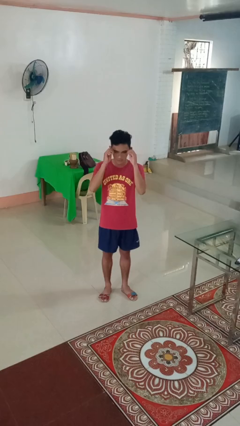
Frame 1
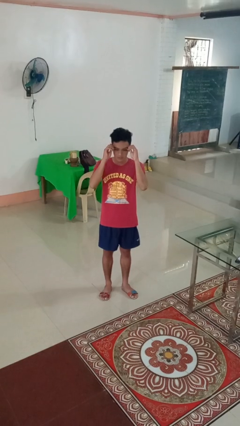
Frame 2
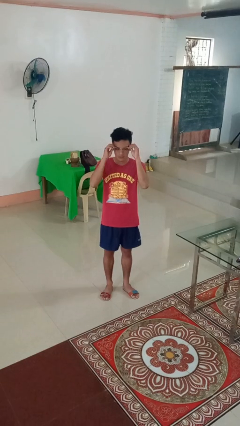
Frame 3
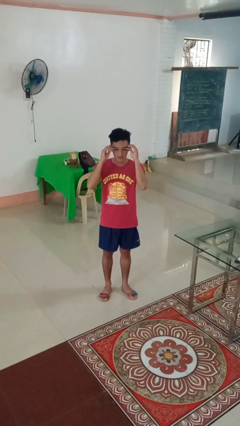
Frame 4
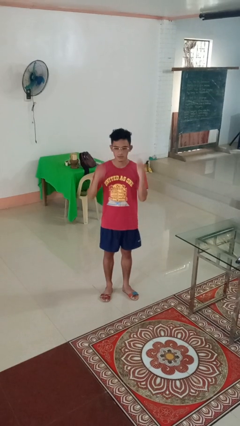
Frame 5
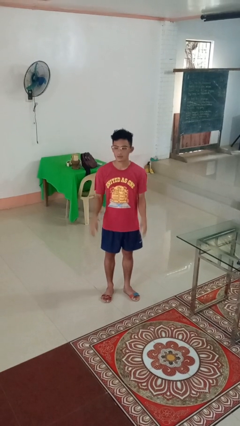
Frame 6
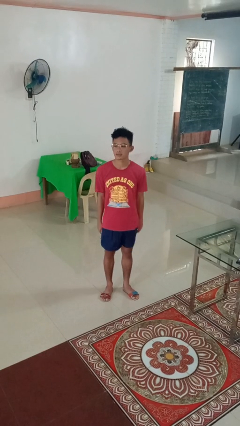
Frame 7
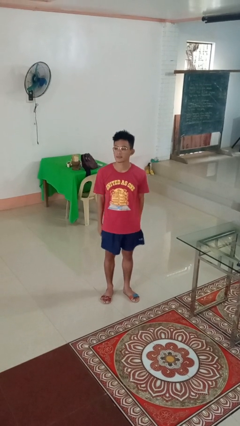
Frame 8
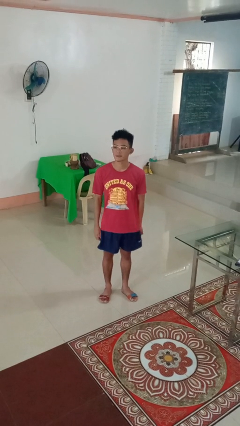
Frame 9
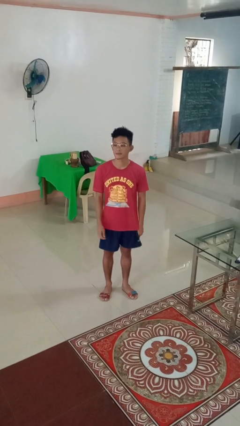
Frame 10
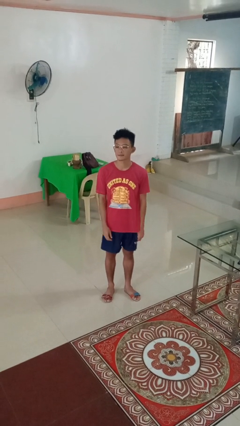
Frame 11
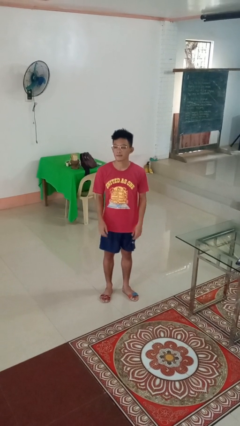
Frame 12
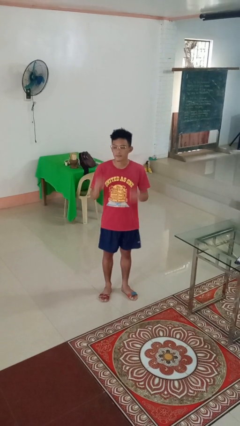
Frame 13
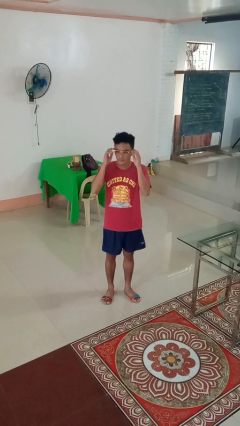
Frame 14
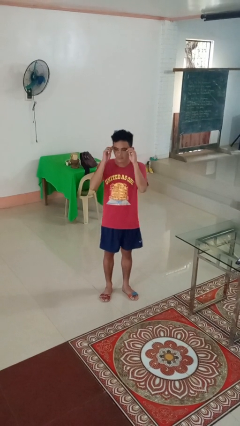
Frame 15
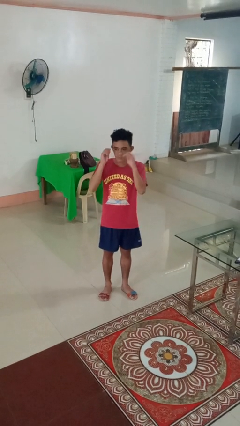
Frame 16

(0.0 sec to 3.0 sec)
person puts on glasses

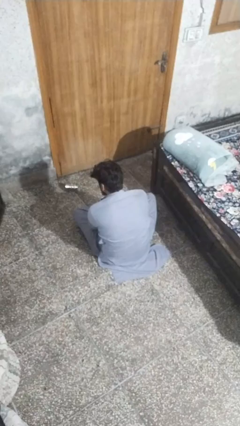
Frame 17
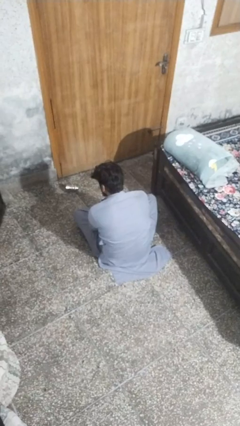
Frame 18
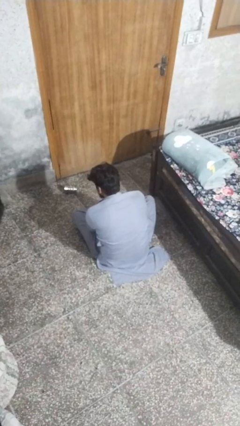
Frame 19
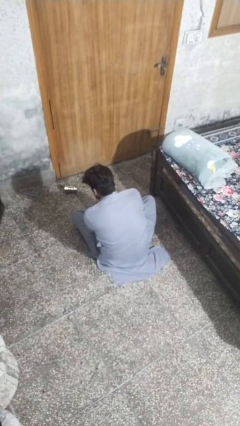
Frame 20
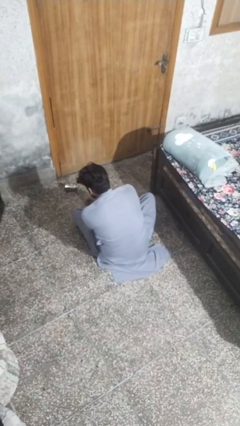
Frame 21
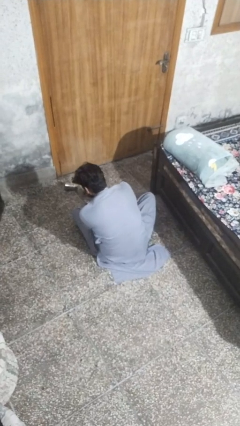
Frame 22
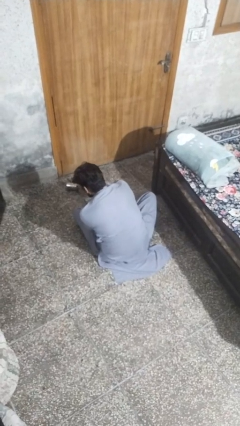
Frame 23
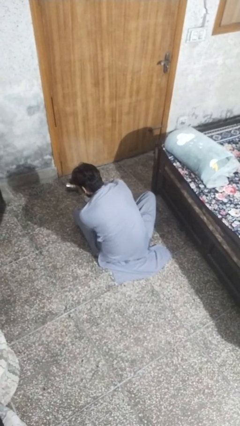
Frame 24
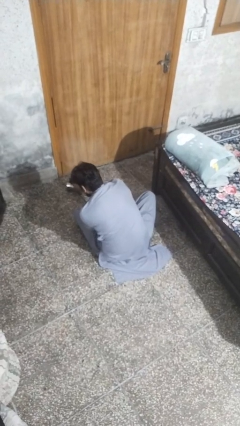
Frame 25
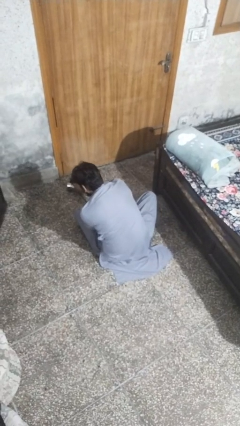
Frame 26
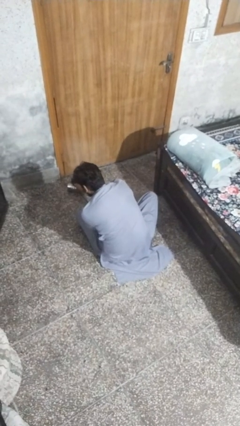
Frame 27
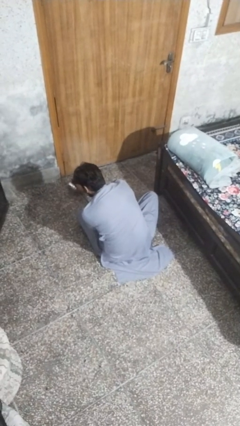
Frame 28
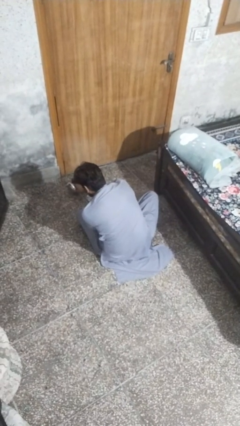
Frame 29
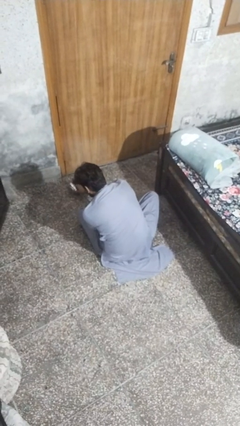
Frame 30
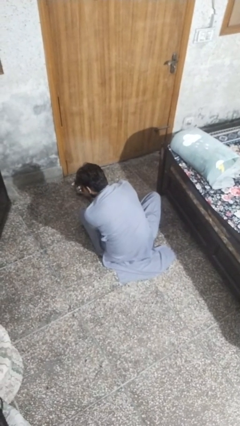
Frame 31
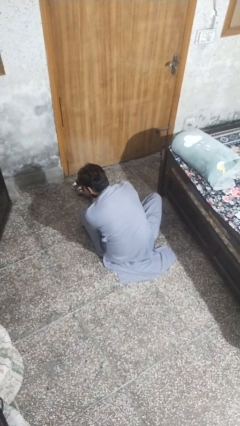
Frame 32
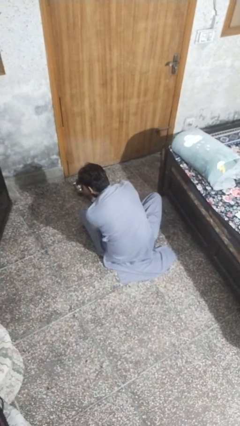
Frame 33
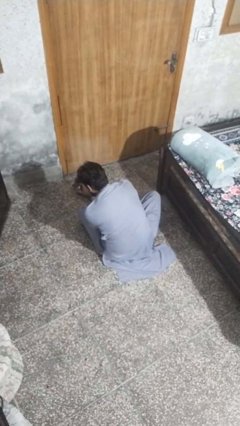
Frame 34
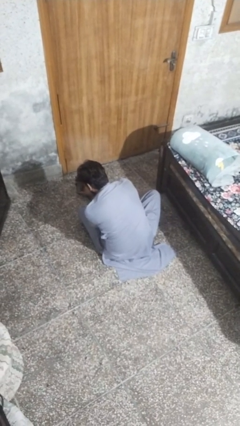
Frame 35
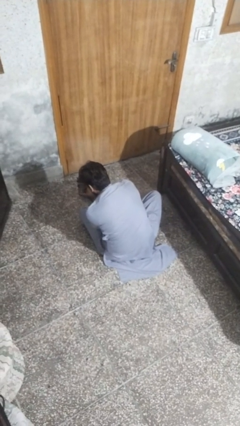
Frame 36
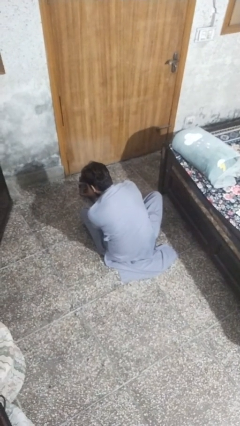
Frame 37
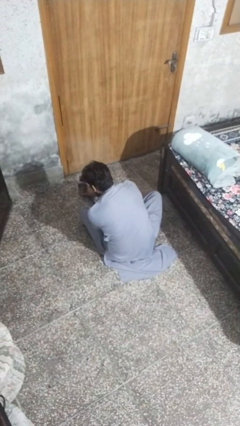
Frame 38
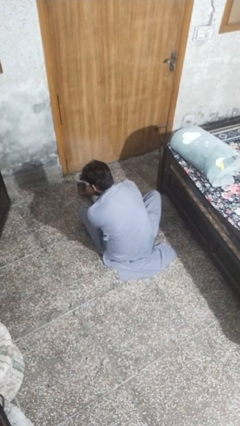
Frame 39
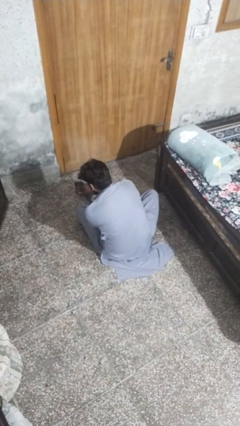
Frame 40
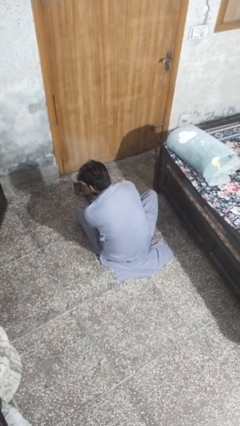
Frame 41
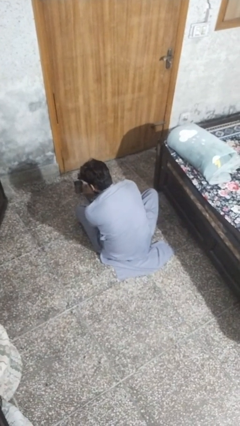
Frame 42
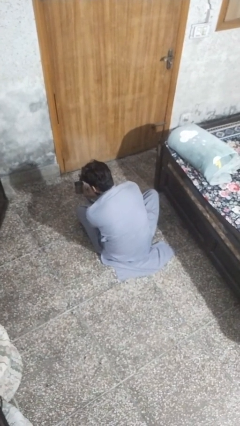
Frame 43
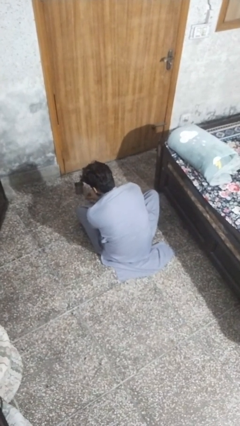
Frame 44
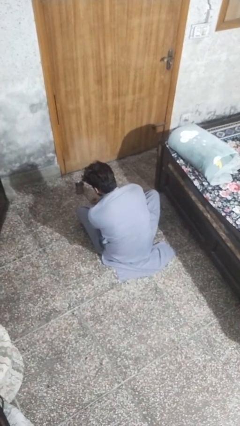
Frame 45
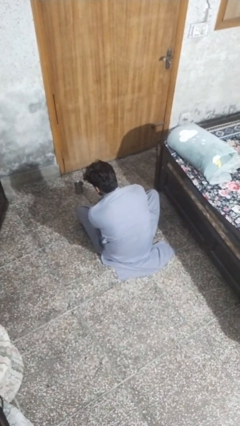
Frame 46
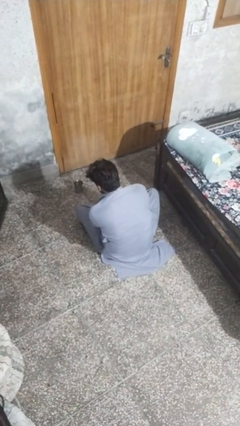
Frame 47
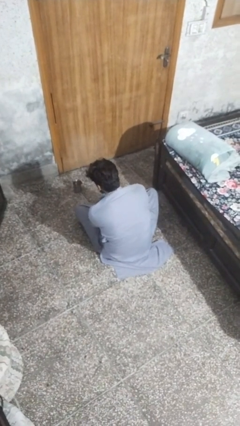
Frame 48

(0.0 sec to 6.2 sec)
person sets upright glass

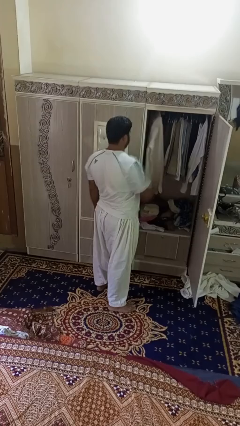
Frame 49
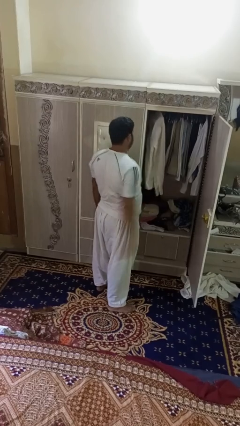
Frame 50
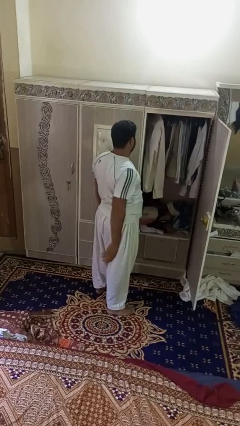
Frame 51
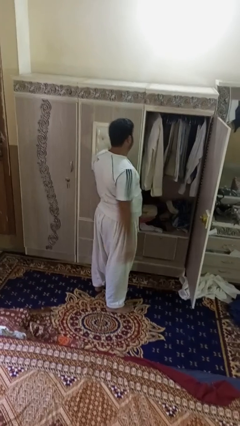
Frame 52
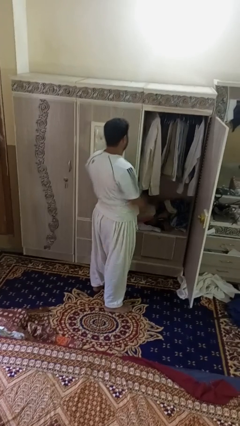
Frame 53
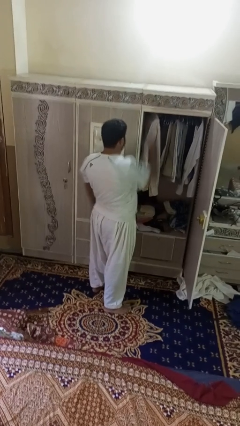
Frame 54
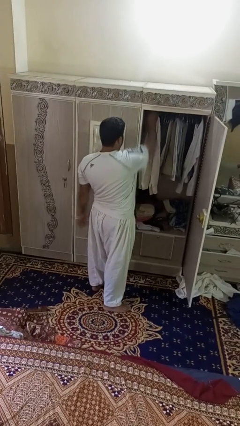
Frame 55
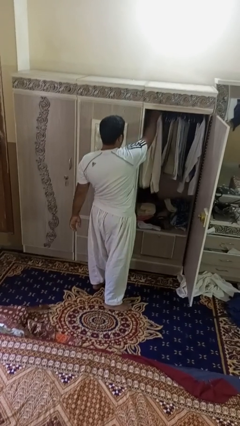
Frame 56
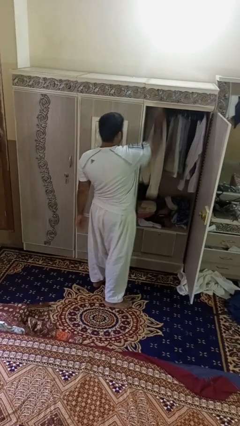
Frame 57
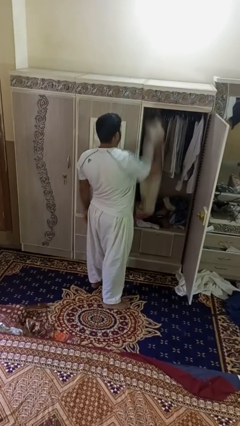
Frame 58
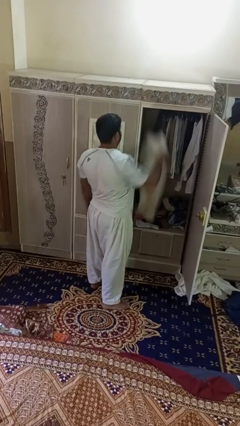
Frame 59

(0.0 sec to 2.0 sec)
person takes clothes from closet

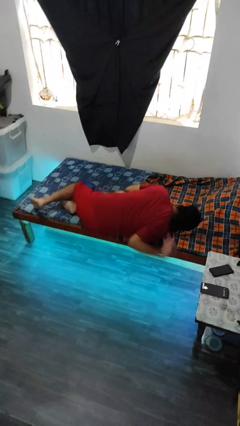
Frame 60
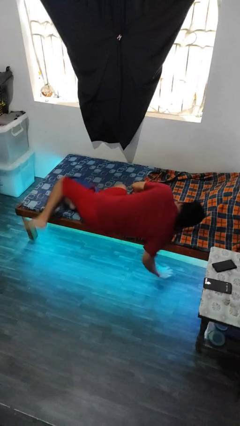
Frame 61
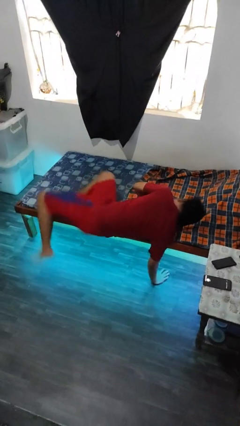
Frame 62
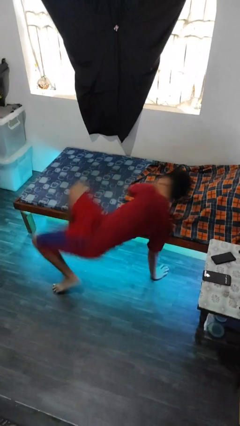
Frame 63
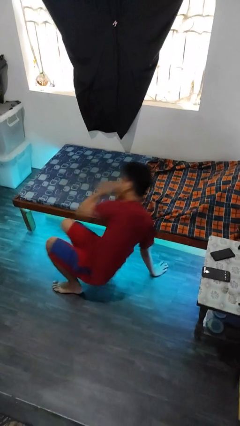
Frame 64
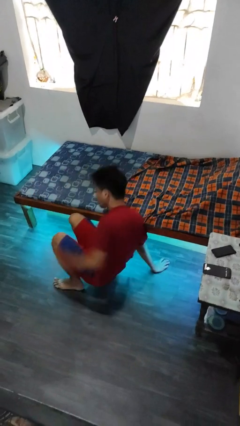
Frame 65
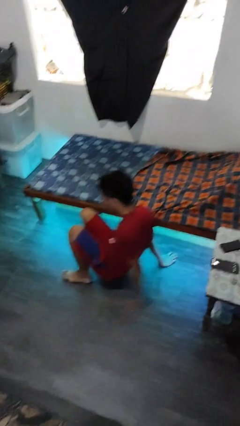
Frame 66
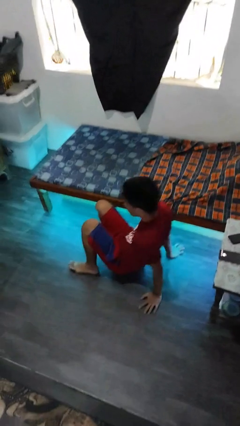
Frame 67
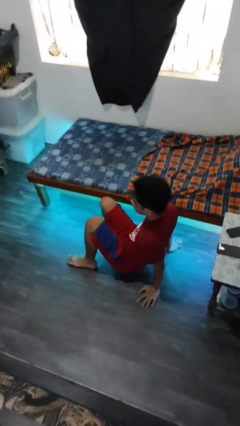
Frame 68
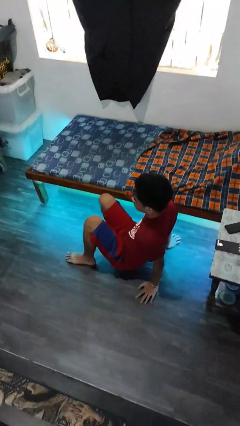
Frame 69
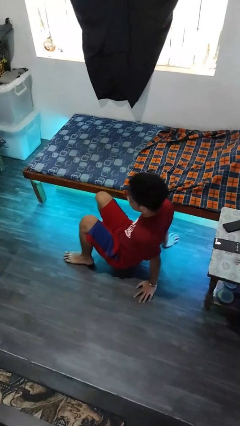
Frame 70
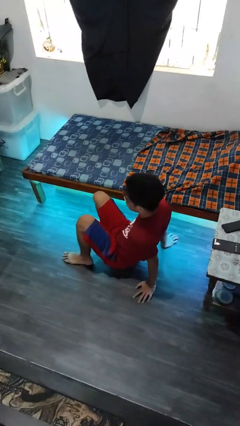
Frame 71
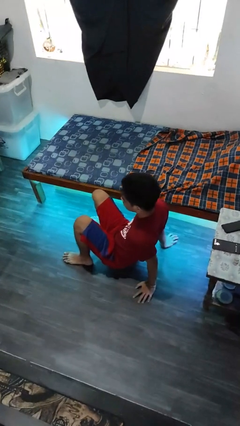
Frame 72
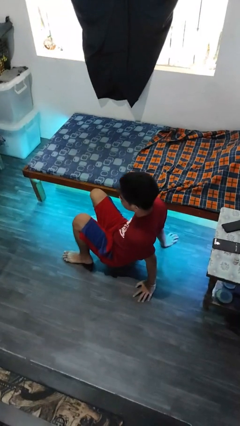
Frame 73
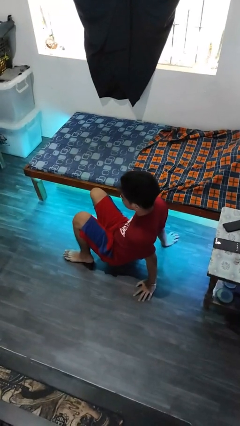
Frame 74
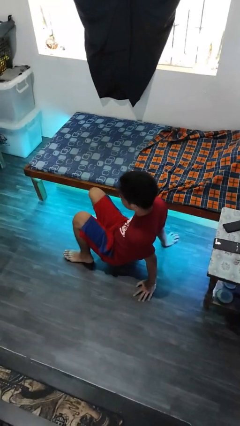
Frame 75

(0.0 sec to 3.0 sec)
person falls from bed

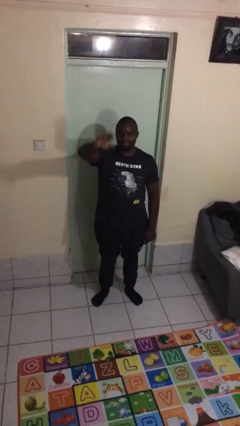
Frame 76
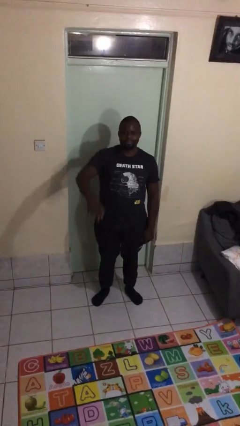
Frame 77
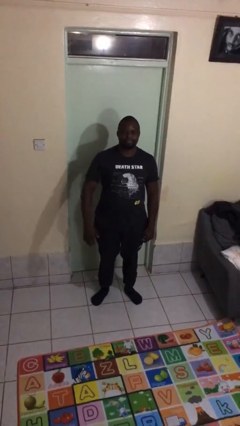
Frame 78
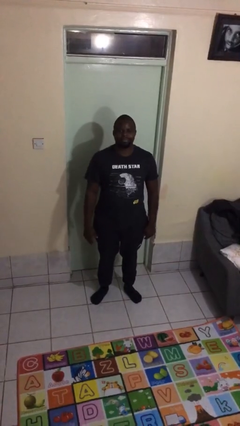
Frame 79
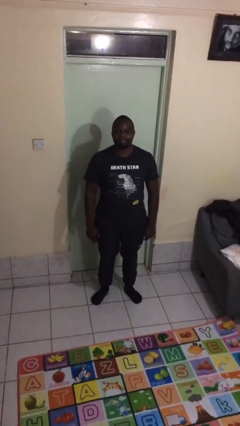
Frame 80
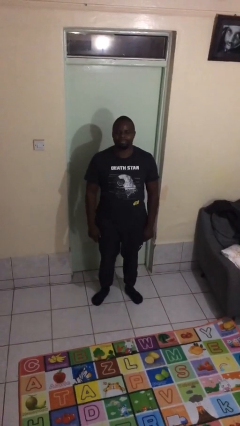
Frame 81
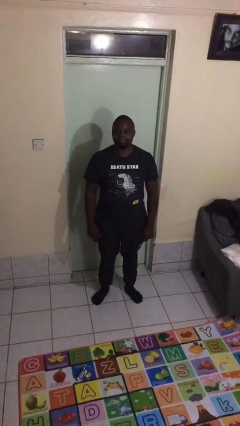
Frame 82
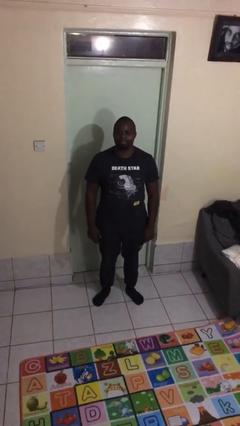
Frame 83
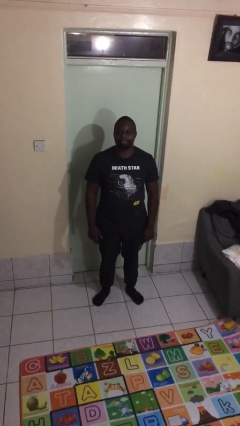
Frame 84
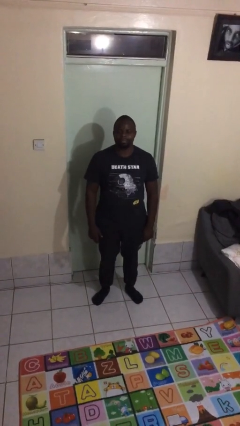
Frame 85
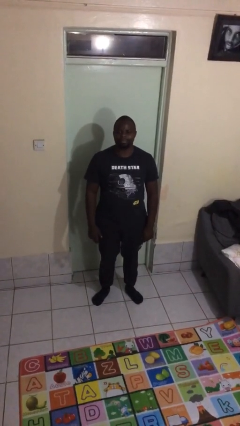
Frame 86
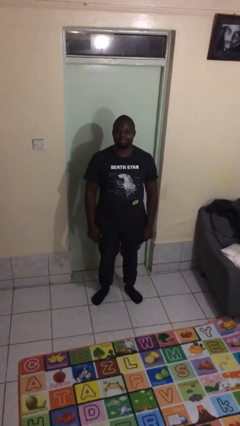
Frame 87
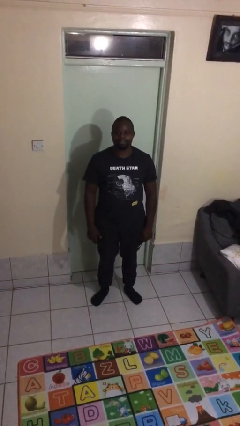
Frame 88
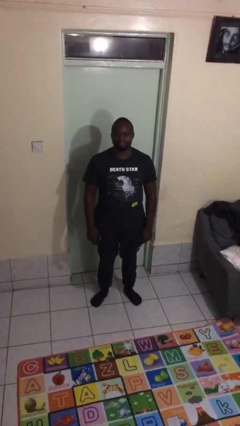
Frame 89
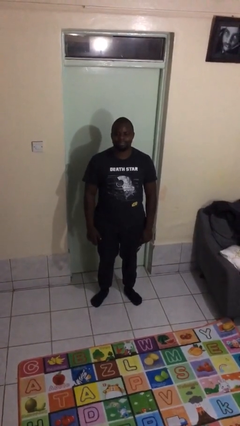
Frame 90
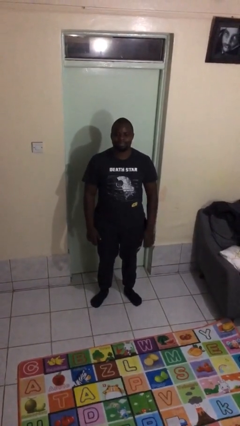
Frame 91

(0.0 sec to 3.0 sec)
person gestures lower hand

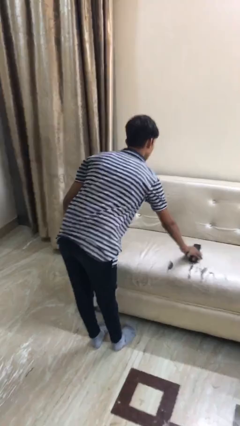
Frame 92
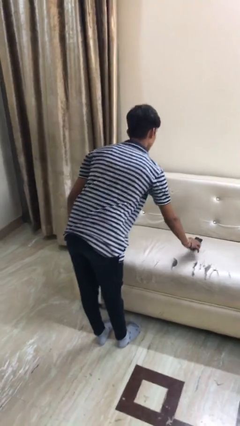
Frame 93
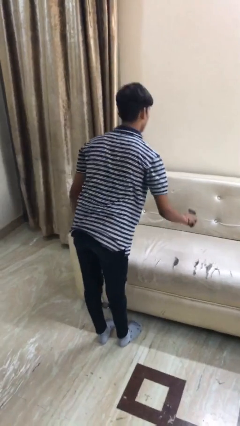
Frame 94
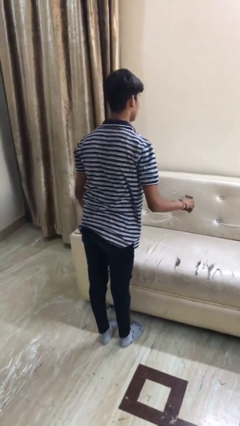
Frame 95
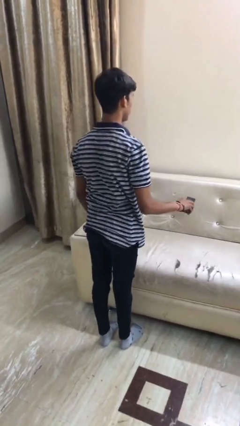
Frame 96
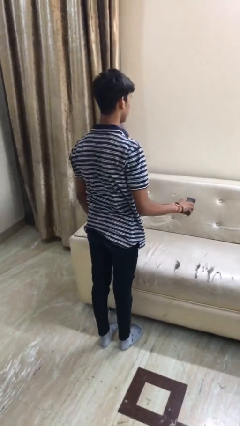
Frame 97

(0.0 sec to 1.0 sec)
person picks up object from bed
